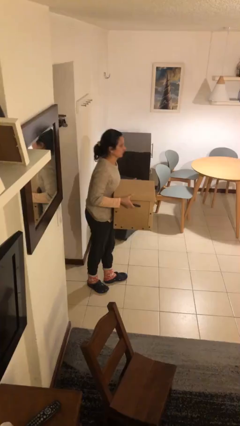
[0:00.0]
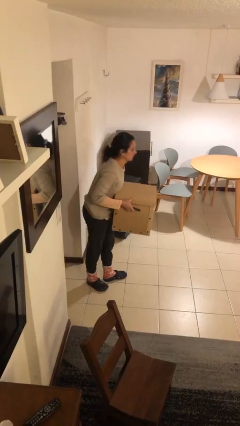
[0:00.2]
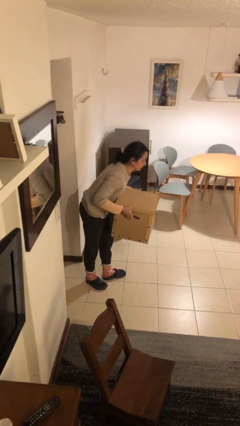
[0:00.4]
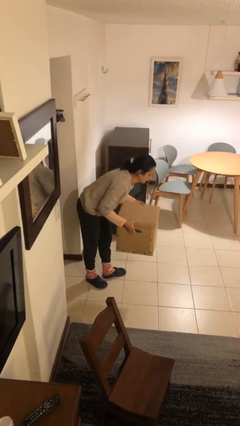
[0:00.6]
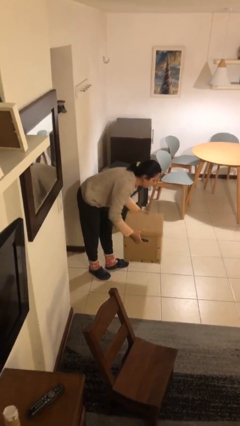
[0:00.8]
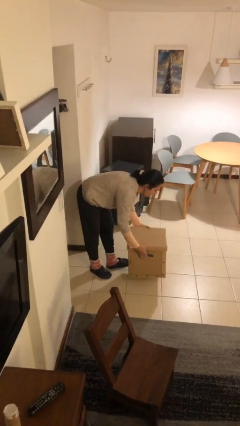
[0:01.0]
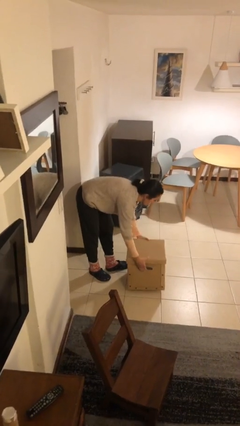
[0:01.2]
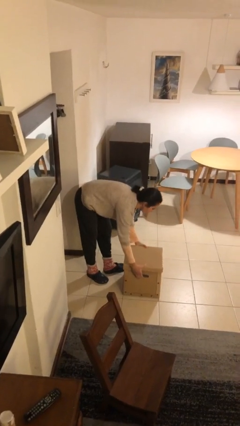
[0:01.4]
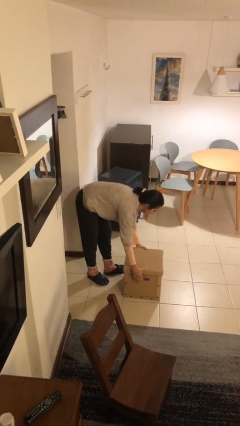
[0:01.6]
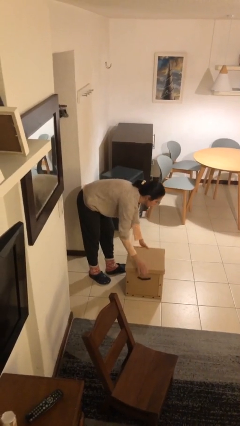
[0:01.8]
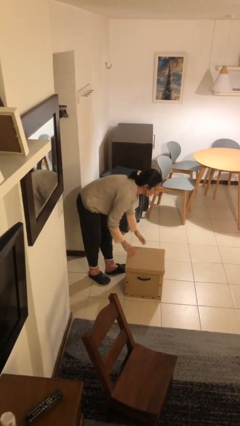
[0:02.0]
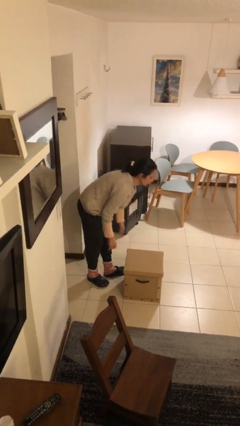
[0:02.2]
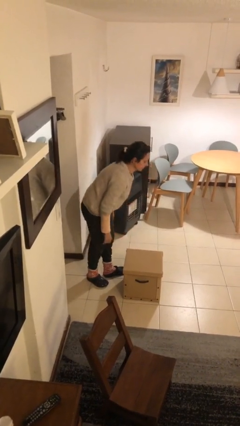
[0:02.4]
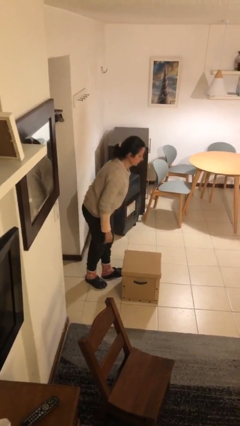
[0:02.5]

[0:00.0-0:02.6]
person puts down object on floor

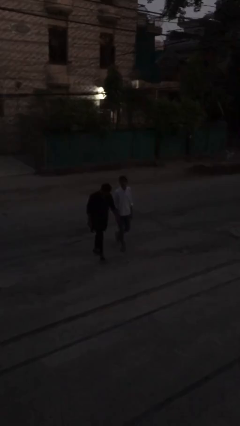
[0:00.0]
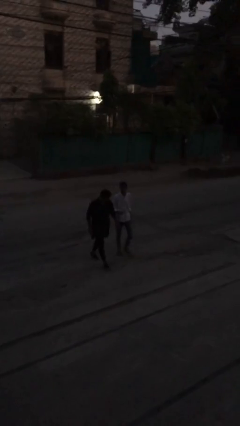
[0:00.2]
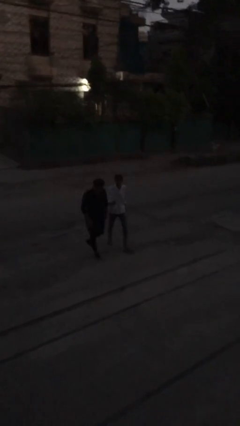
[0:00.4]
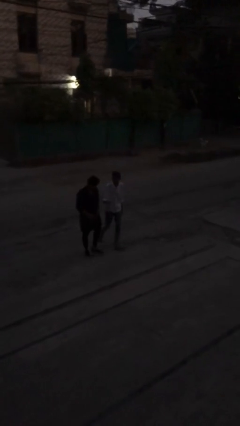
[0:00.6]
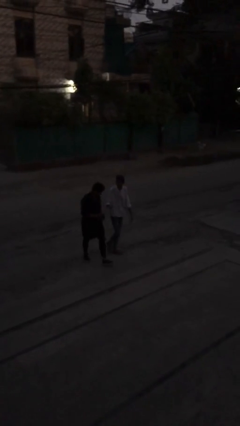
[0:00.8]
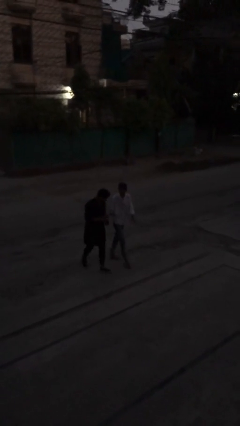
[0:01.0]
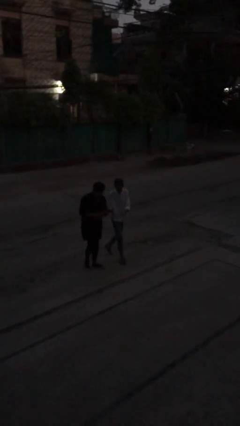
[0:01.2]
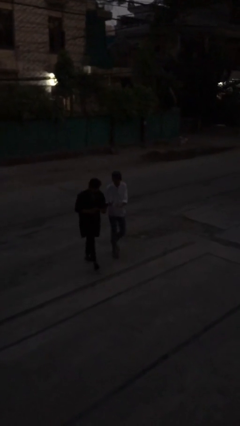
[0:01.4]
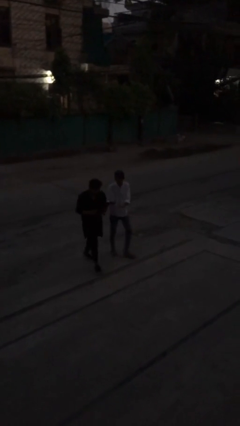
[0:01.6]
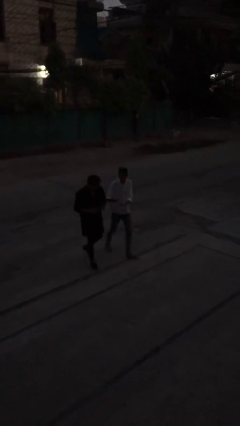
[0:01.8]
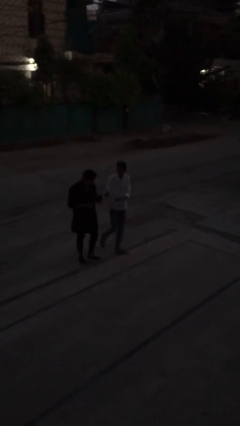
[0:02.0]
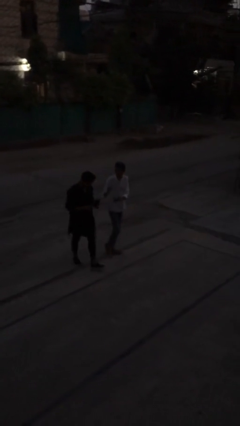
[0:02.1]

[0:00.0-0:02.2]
person talks to person

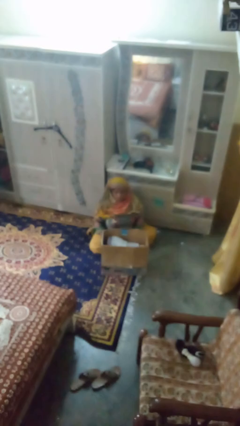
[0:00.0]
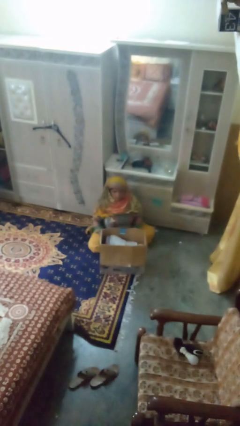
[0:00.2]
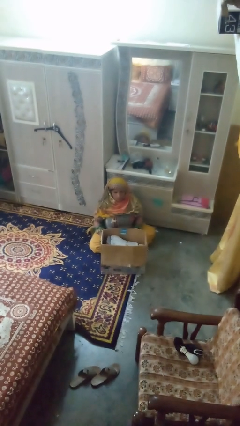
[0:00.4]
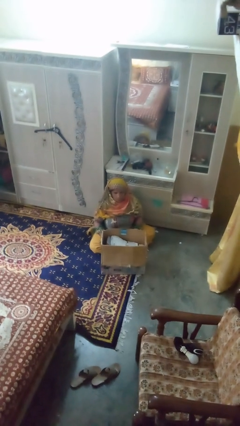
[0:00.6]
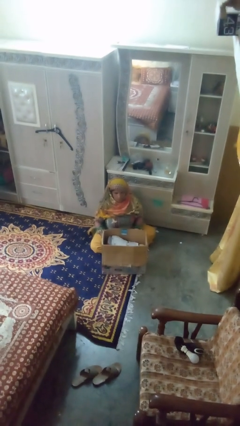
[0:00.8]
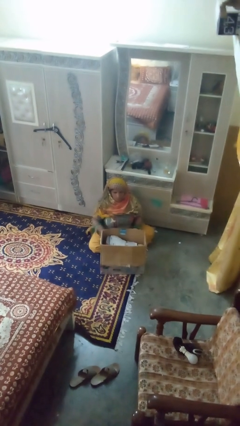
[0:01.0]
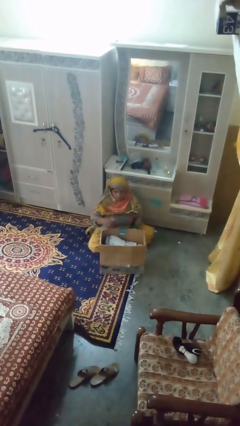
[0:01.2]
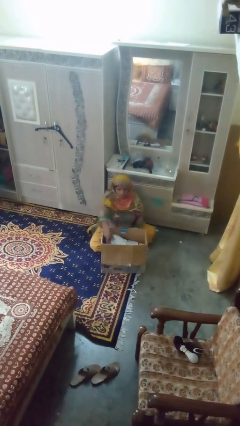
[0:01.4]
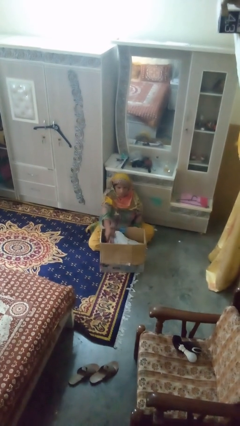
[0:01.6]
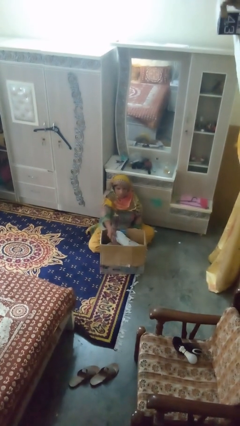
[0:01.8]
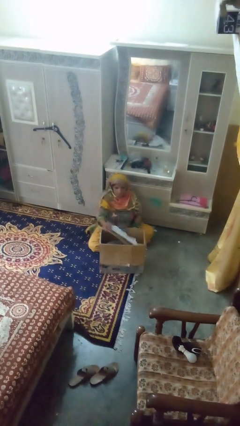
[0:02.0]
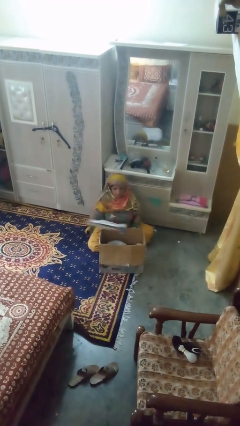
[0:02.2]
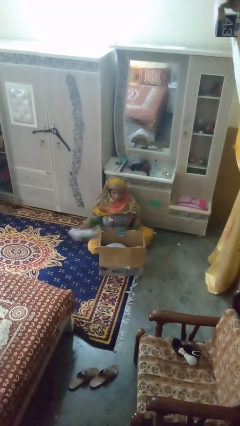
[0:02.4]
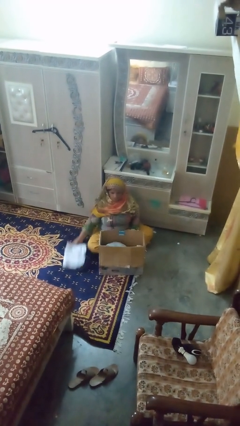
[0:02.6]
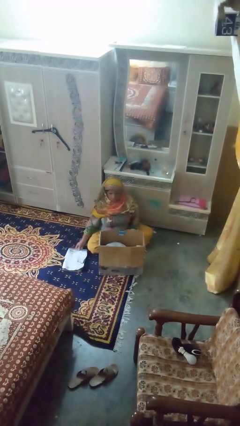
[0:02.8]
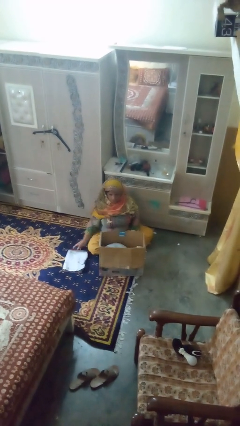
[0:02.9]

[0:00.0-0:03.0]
person takes object from box

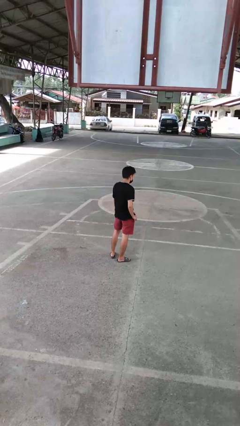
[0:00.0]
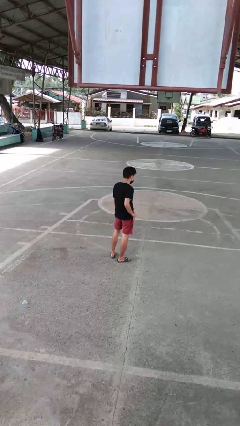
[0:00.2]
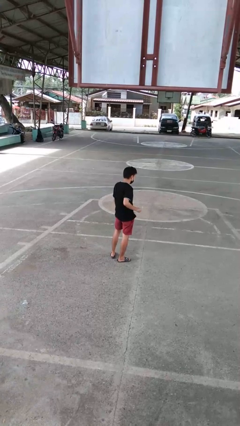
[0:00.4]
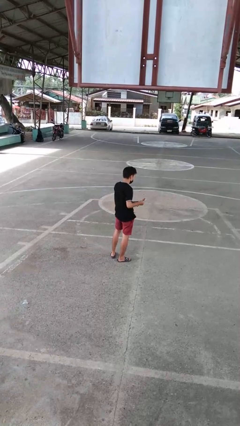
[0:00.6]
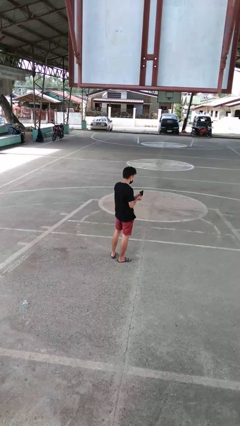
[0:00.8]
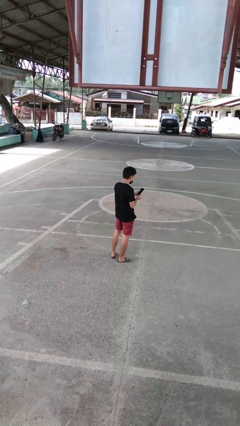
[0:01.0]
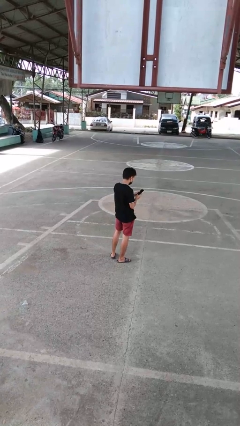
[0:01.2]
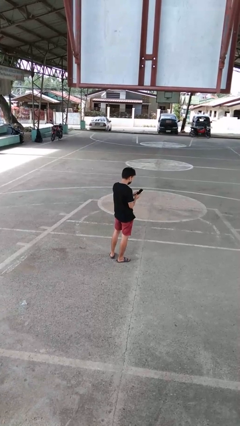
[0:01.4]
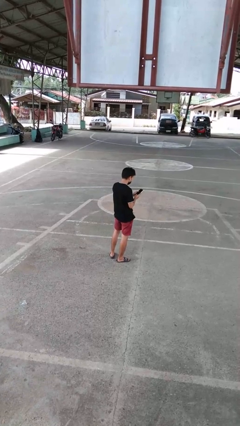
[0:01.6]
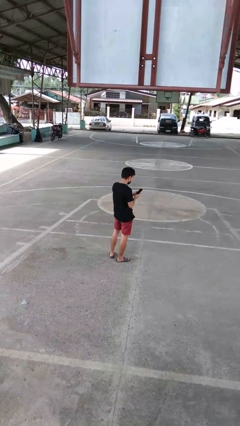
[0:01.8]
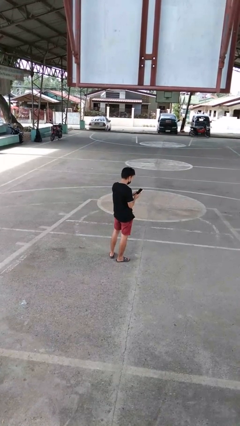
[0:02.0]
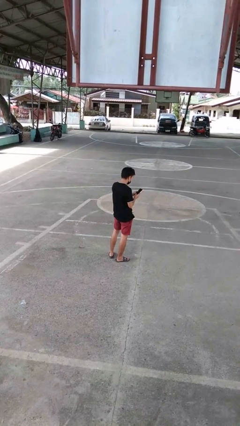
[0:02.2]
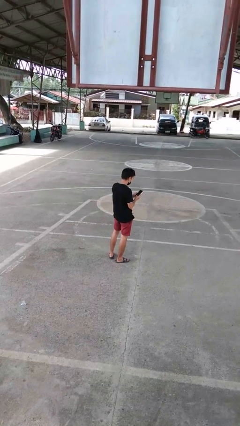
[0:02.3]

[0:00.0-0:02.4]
person takes phone from pocket

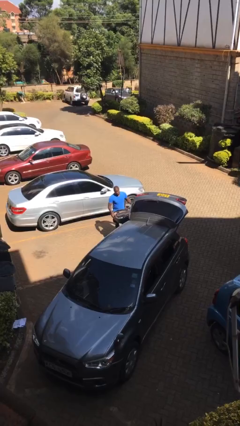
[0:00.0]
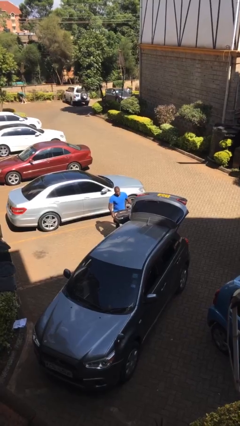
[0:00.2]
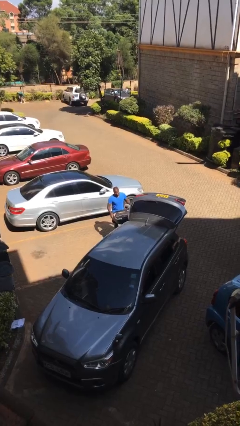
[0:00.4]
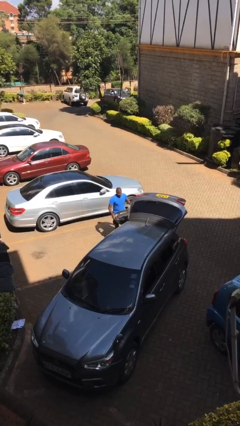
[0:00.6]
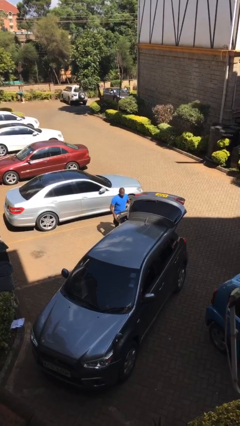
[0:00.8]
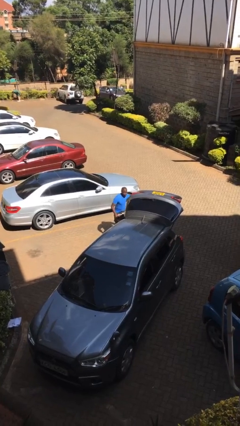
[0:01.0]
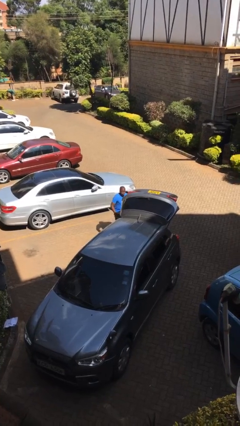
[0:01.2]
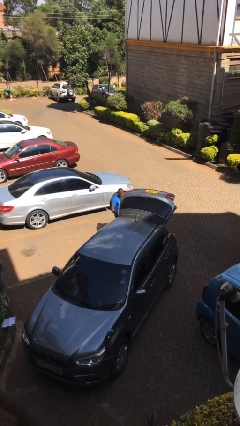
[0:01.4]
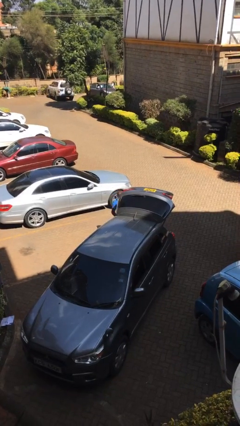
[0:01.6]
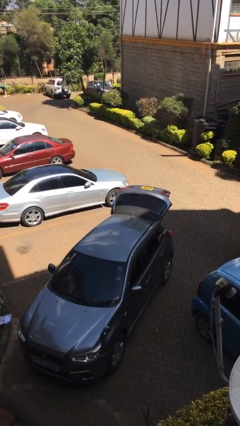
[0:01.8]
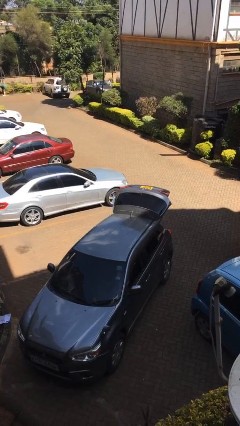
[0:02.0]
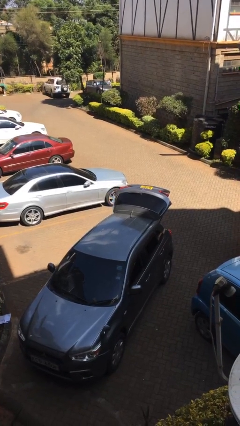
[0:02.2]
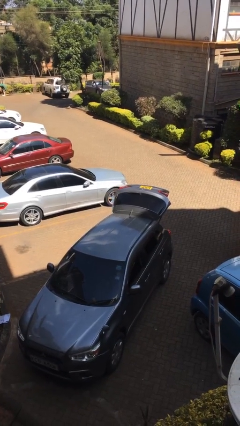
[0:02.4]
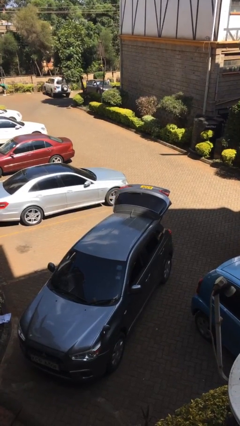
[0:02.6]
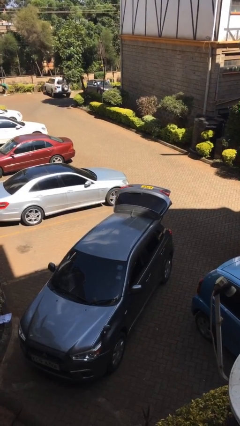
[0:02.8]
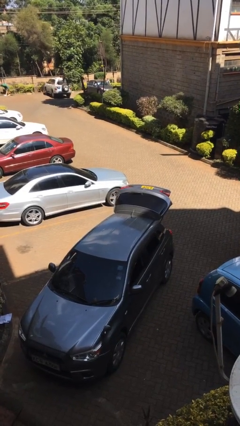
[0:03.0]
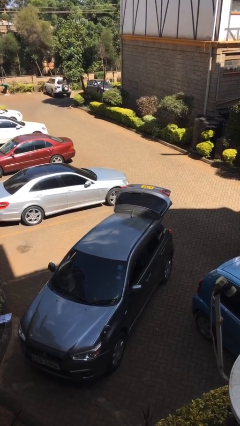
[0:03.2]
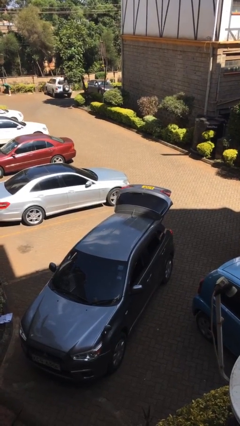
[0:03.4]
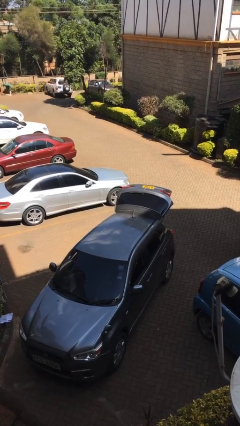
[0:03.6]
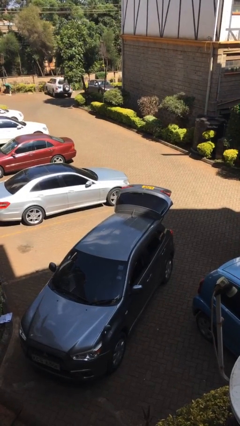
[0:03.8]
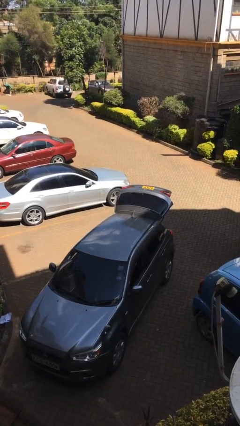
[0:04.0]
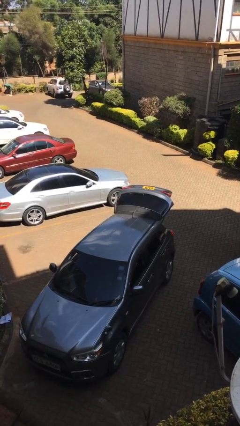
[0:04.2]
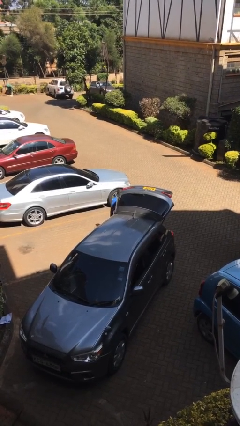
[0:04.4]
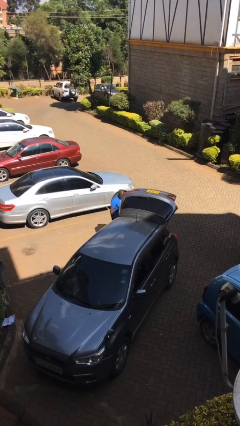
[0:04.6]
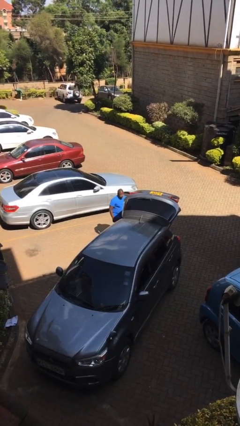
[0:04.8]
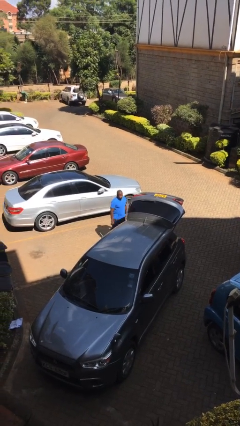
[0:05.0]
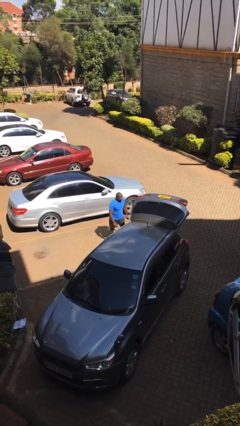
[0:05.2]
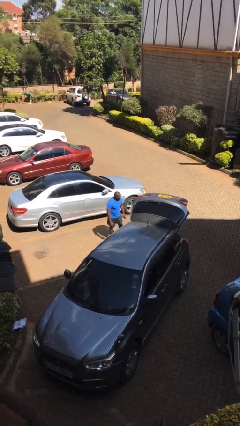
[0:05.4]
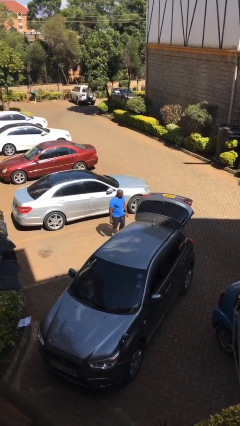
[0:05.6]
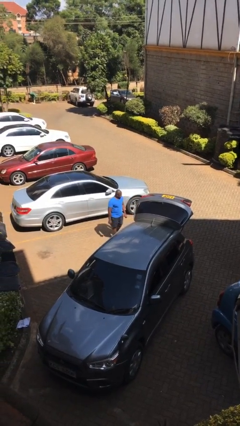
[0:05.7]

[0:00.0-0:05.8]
person loads car

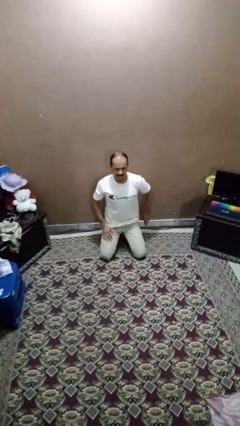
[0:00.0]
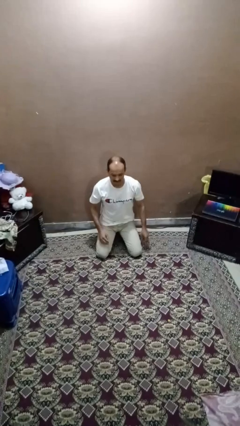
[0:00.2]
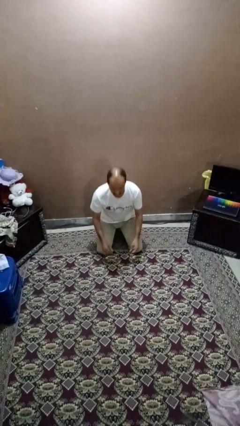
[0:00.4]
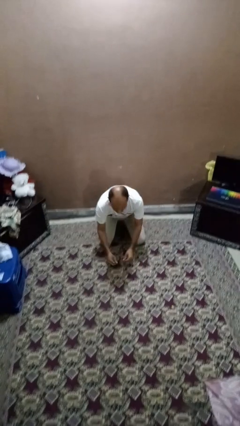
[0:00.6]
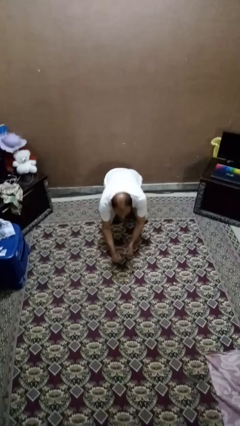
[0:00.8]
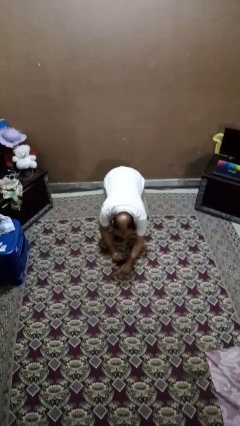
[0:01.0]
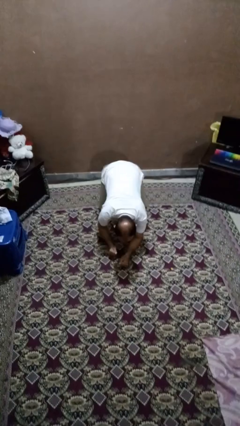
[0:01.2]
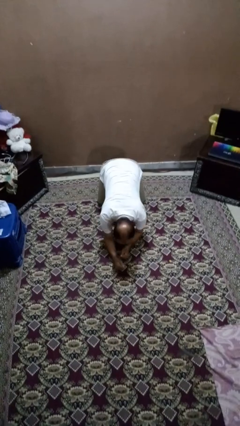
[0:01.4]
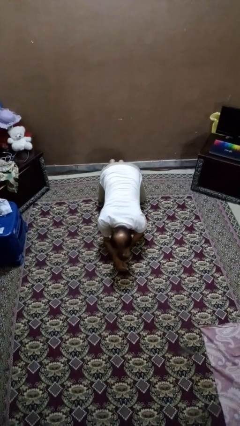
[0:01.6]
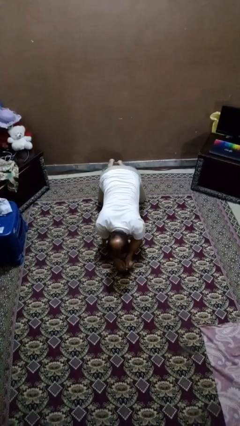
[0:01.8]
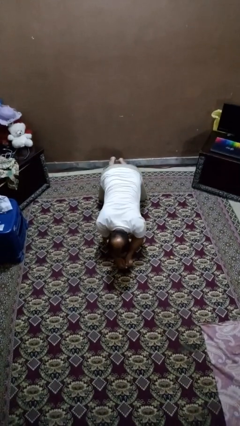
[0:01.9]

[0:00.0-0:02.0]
person crawls
